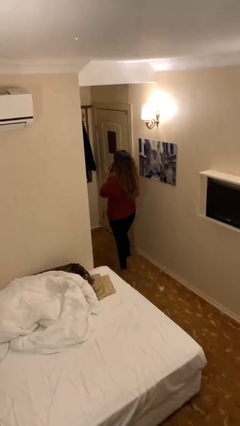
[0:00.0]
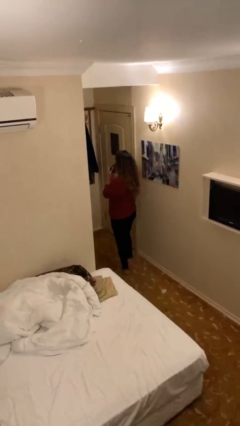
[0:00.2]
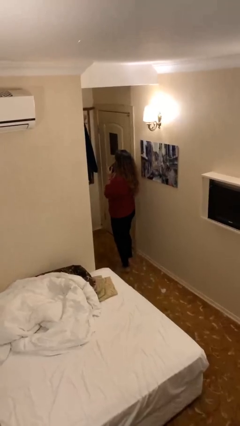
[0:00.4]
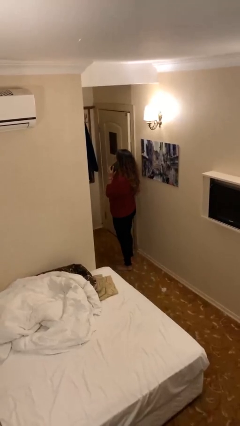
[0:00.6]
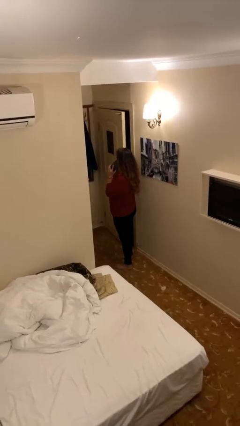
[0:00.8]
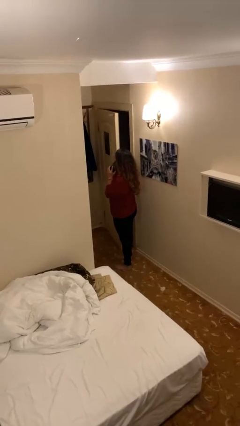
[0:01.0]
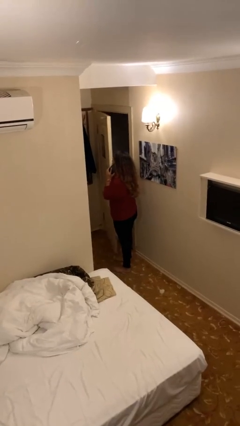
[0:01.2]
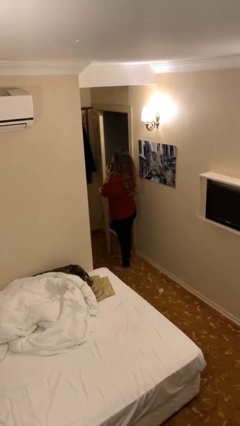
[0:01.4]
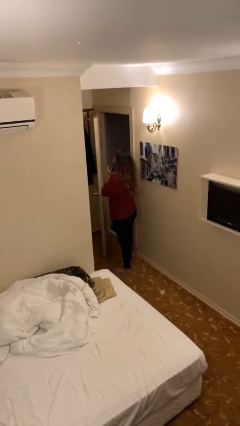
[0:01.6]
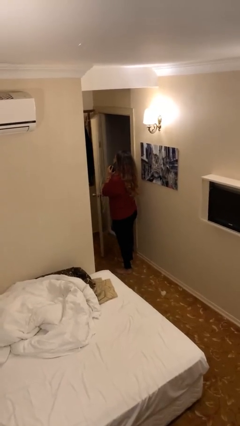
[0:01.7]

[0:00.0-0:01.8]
person opens facility door

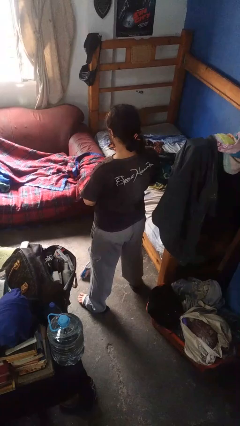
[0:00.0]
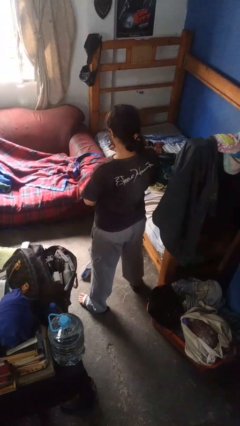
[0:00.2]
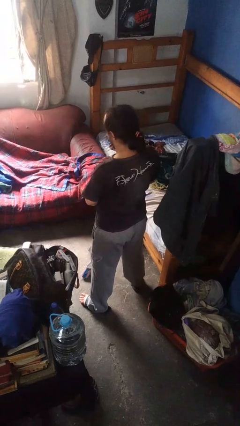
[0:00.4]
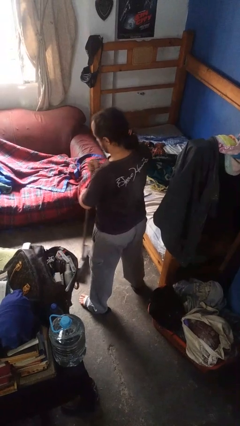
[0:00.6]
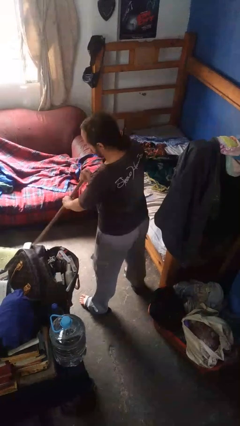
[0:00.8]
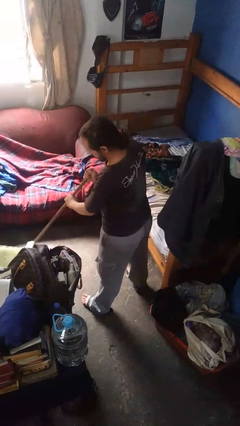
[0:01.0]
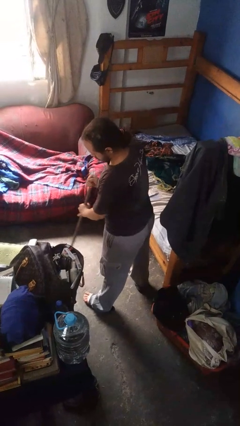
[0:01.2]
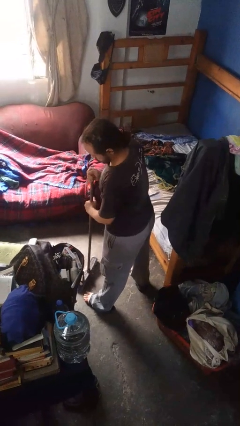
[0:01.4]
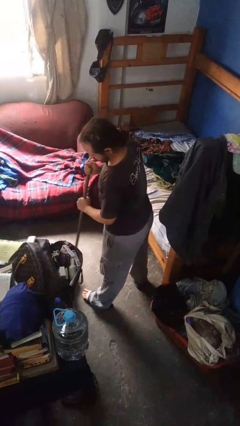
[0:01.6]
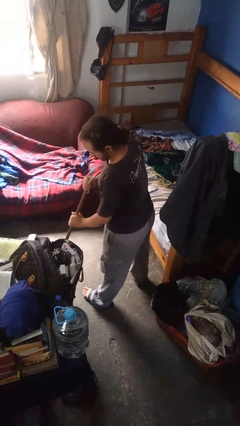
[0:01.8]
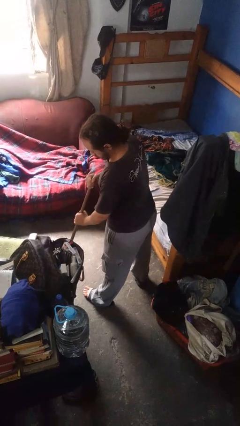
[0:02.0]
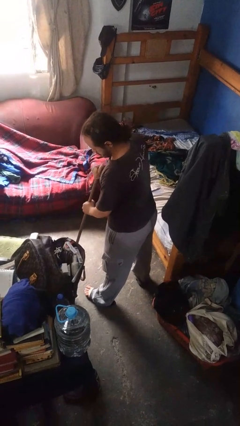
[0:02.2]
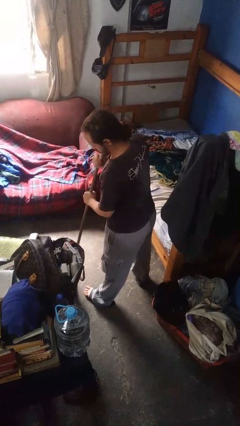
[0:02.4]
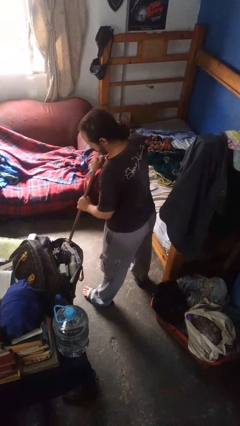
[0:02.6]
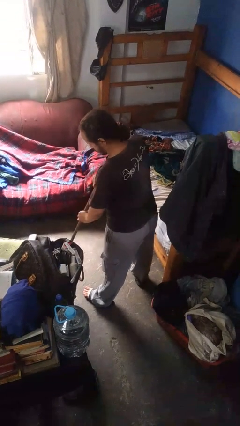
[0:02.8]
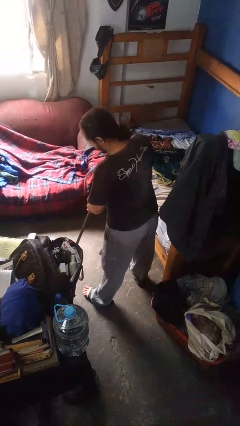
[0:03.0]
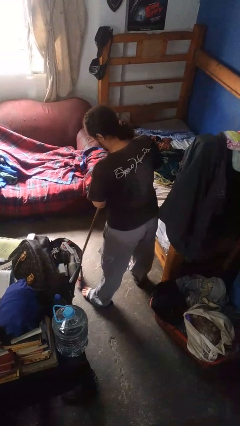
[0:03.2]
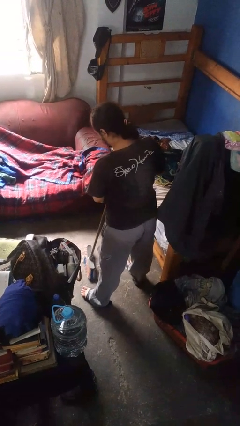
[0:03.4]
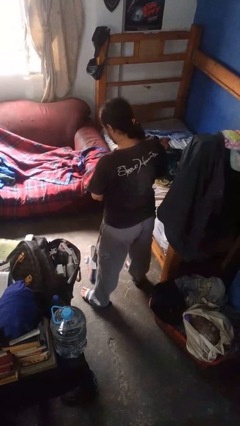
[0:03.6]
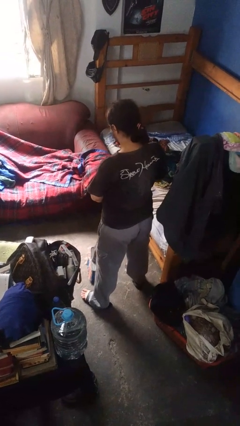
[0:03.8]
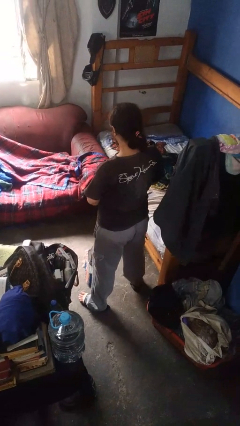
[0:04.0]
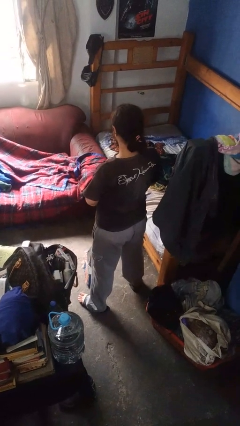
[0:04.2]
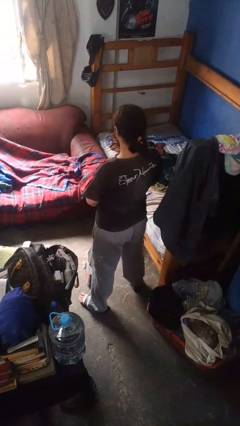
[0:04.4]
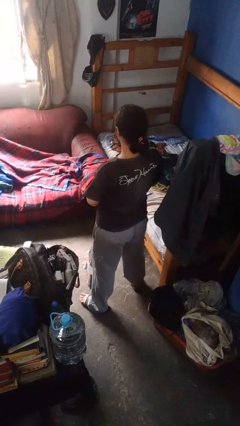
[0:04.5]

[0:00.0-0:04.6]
person sweeps floor

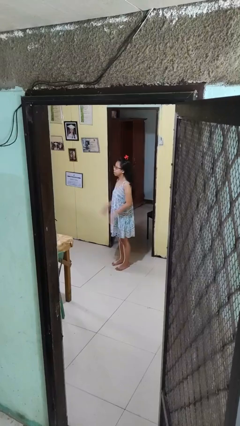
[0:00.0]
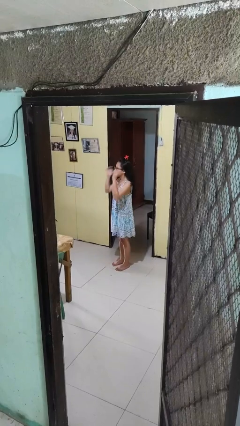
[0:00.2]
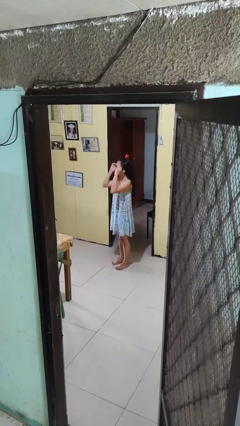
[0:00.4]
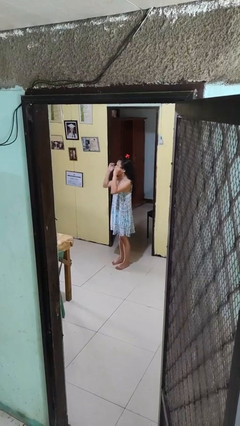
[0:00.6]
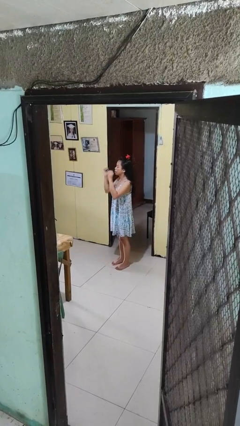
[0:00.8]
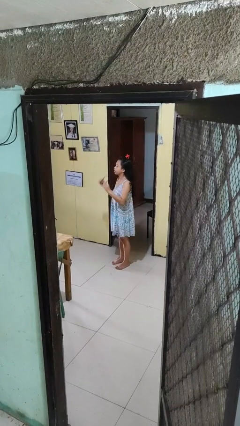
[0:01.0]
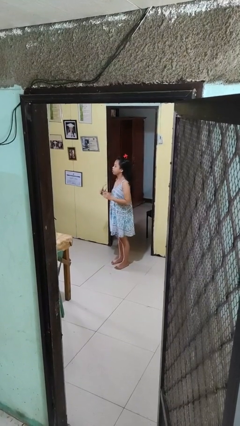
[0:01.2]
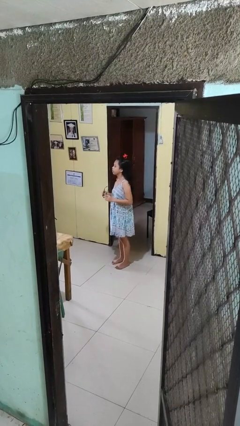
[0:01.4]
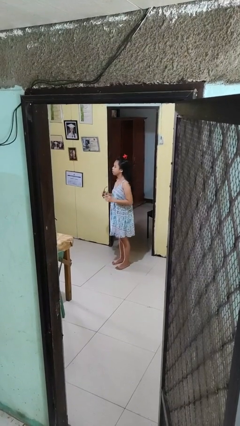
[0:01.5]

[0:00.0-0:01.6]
person takes off glasses

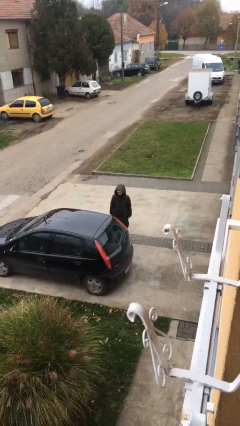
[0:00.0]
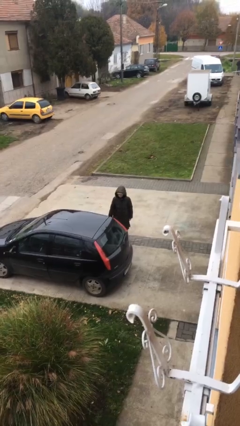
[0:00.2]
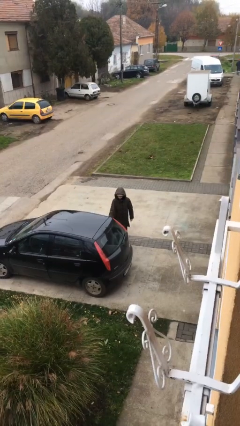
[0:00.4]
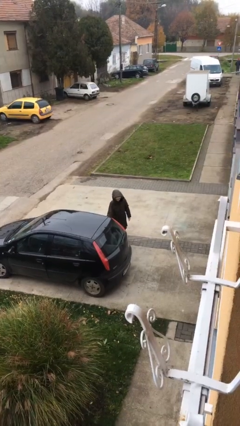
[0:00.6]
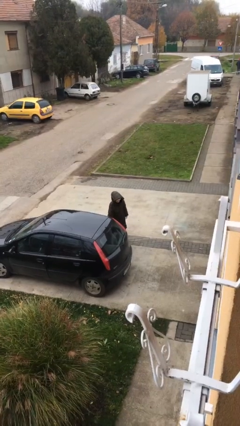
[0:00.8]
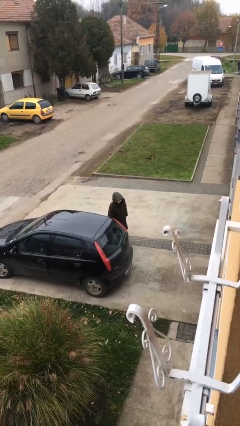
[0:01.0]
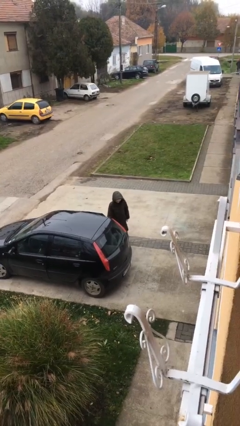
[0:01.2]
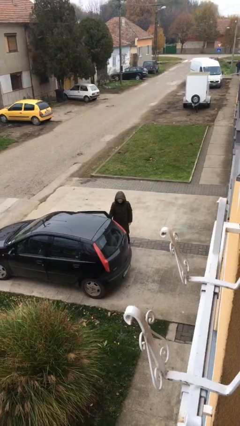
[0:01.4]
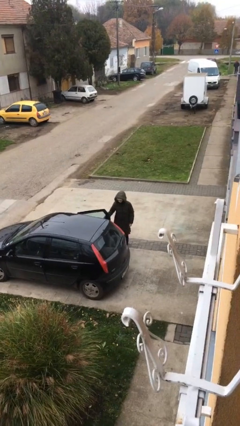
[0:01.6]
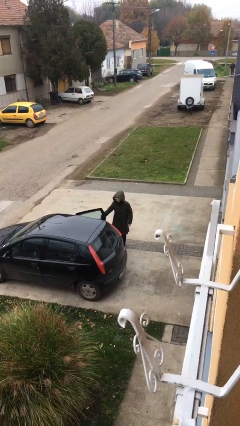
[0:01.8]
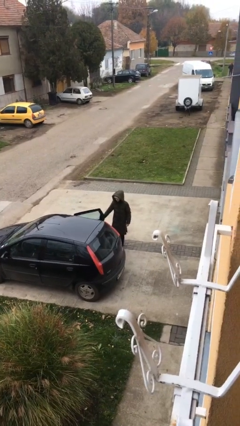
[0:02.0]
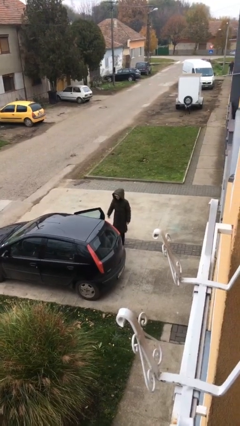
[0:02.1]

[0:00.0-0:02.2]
person opens car door

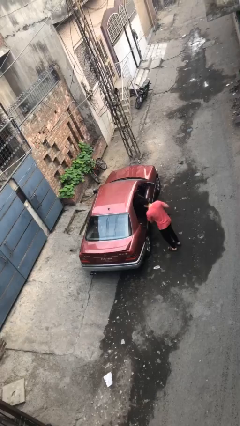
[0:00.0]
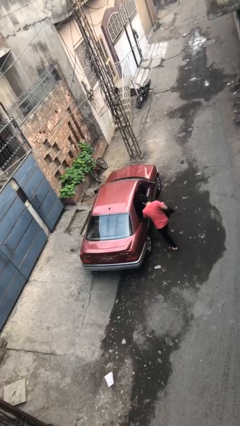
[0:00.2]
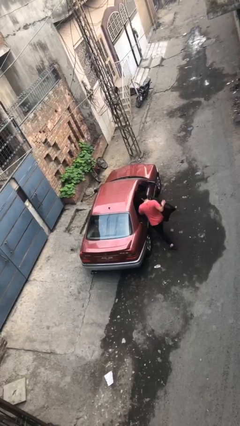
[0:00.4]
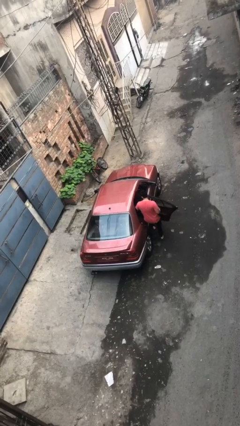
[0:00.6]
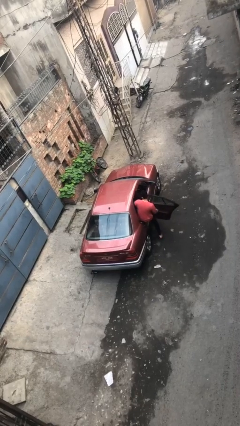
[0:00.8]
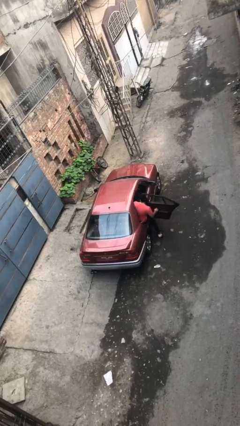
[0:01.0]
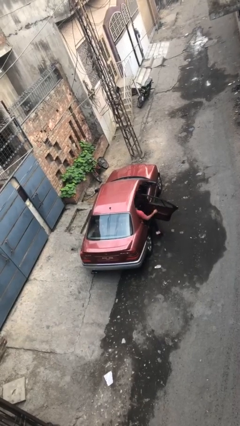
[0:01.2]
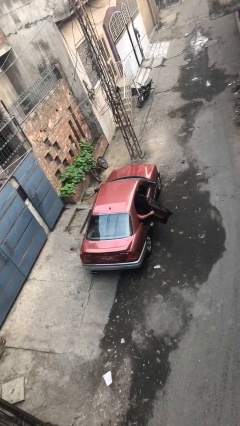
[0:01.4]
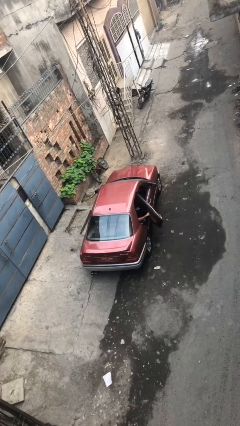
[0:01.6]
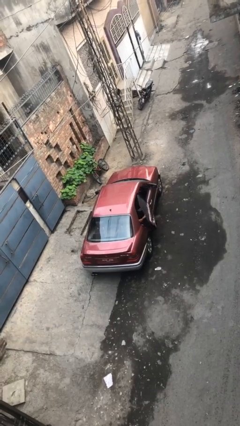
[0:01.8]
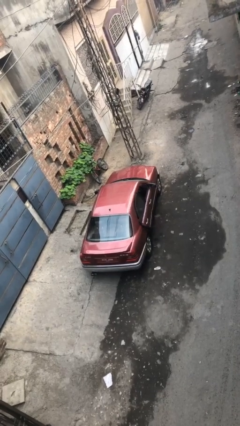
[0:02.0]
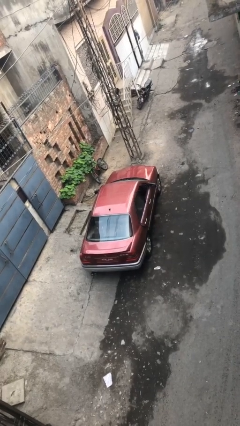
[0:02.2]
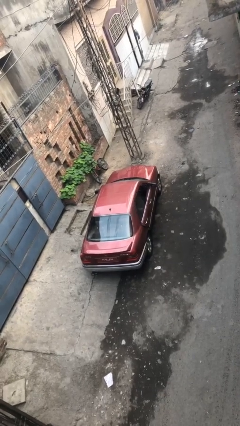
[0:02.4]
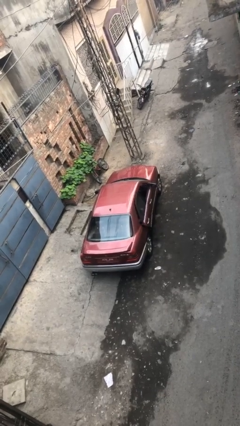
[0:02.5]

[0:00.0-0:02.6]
car picks up person

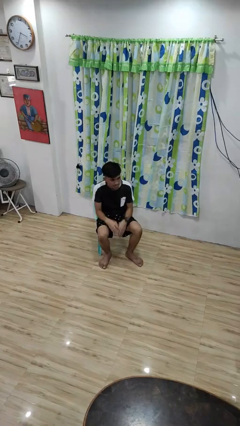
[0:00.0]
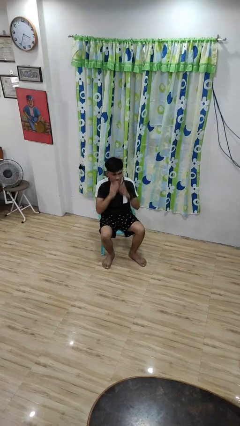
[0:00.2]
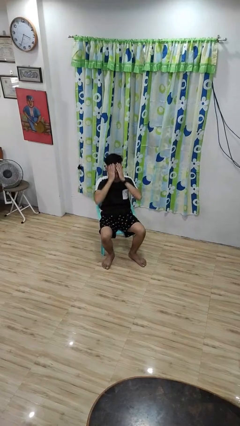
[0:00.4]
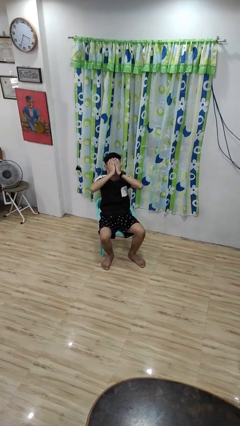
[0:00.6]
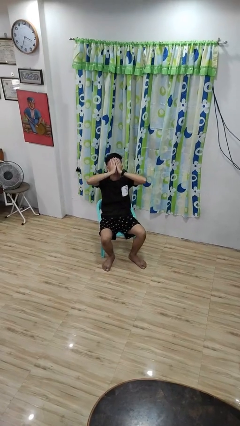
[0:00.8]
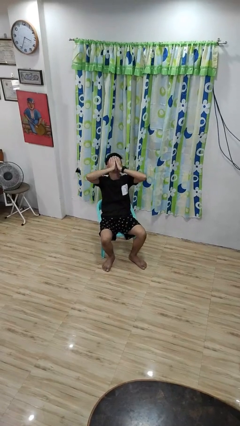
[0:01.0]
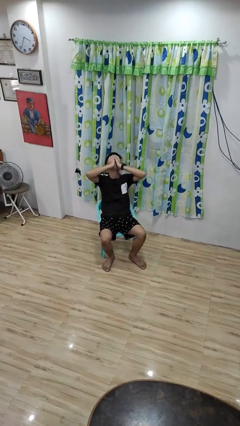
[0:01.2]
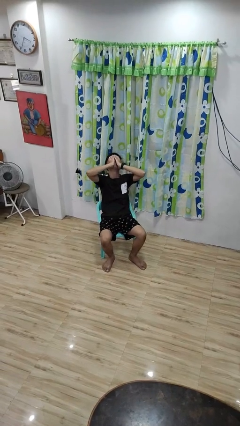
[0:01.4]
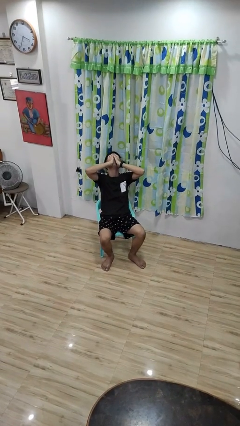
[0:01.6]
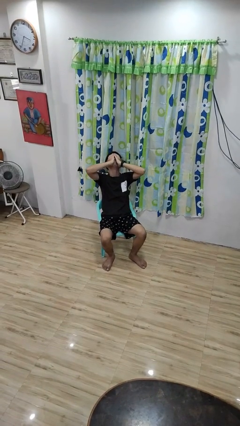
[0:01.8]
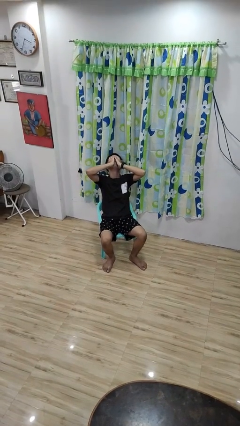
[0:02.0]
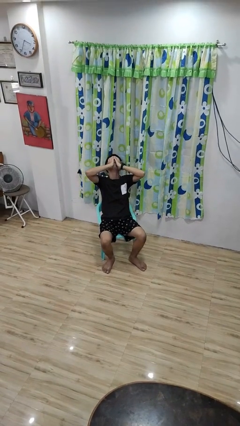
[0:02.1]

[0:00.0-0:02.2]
person covers face with hands

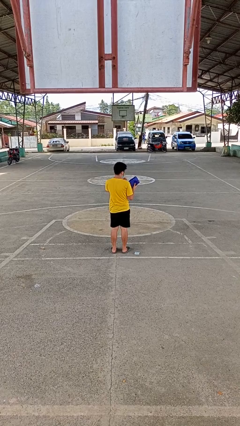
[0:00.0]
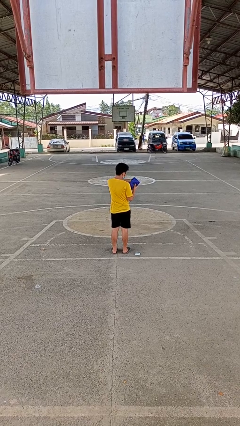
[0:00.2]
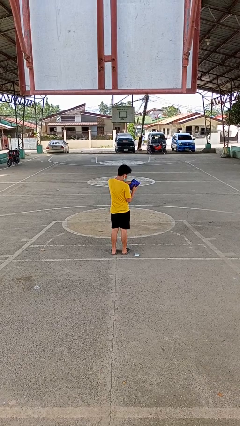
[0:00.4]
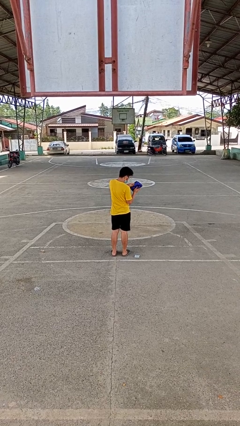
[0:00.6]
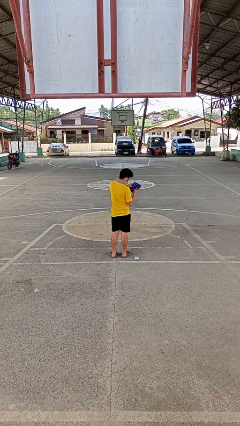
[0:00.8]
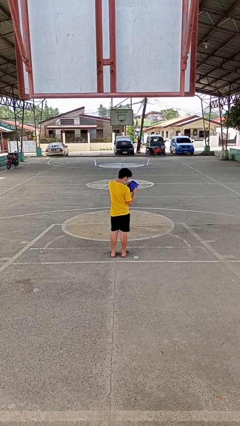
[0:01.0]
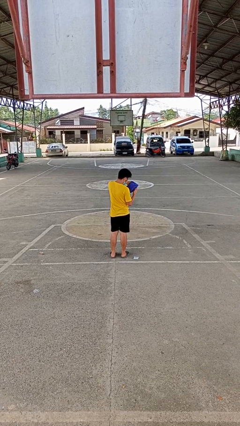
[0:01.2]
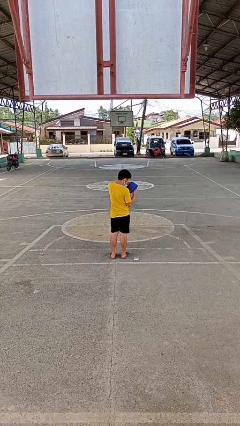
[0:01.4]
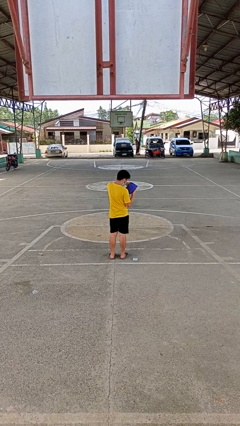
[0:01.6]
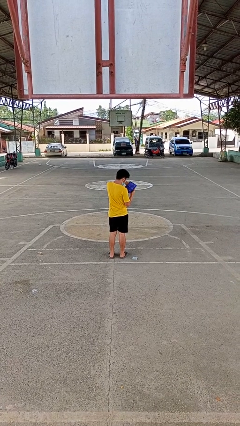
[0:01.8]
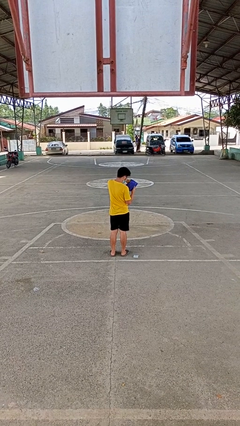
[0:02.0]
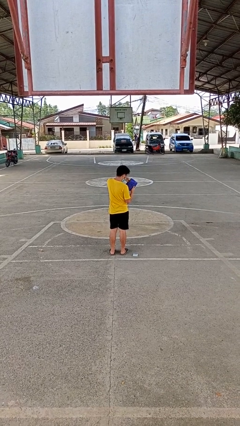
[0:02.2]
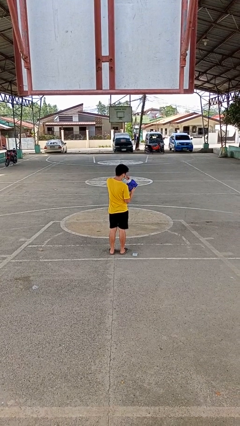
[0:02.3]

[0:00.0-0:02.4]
person searches in purse
